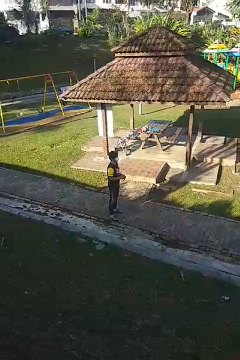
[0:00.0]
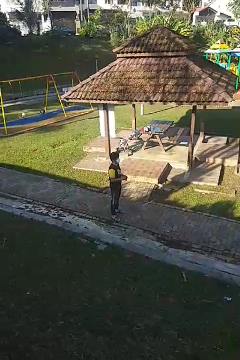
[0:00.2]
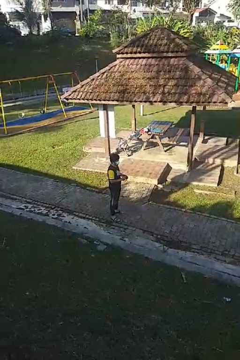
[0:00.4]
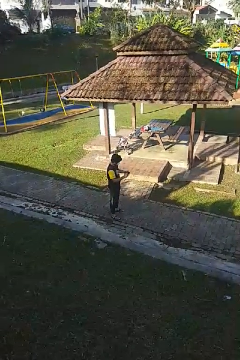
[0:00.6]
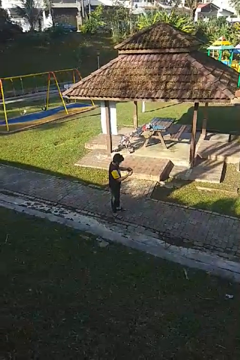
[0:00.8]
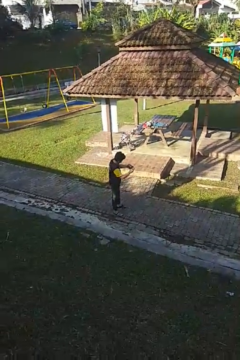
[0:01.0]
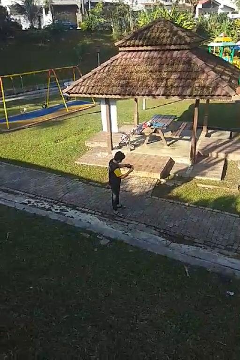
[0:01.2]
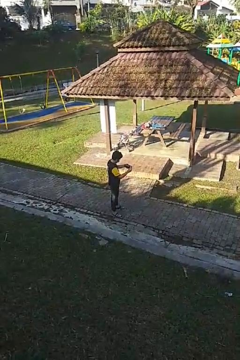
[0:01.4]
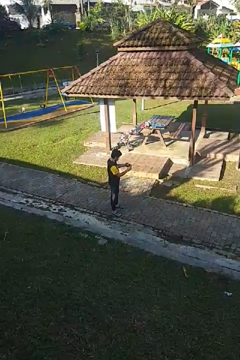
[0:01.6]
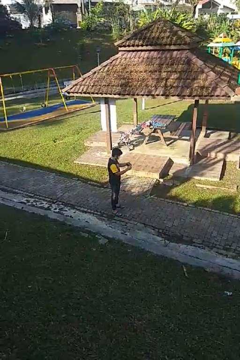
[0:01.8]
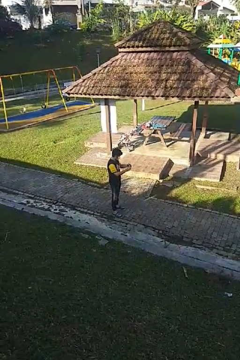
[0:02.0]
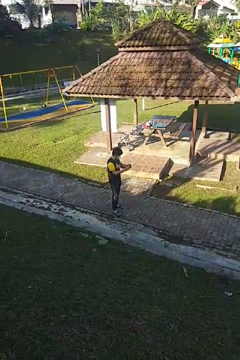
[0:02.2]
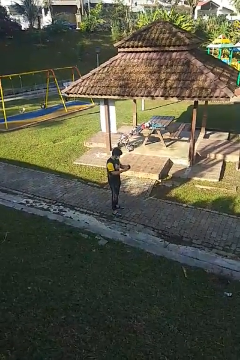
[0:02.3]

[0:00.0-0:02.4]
person searches in purse

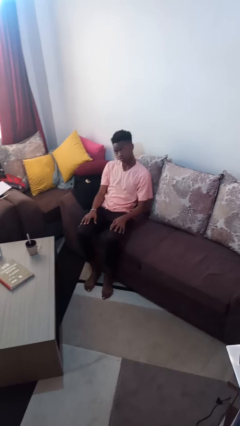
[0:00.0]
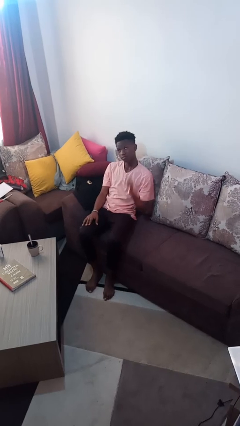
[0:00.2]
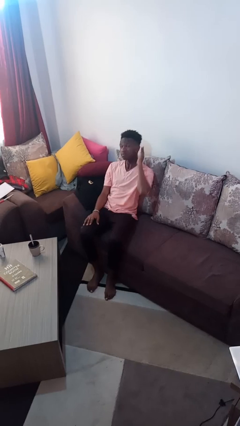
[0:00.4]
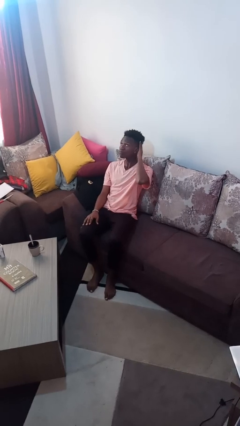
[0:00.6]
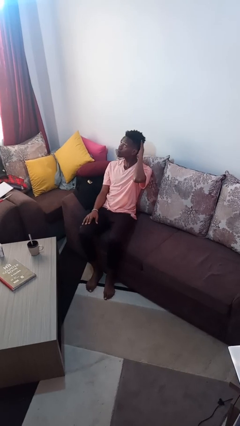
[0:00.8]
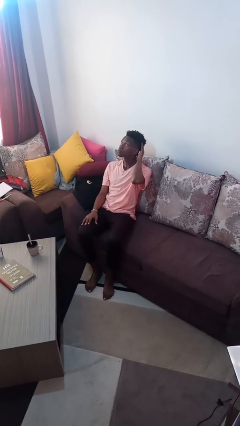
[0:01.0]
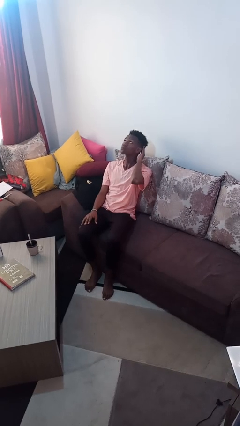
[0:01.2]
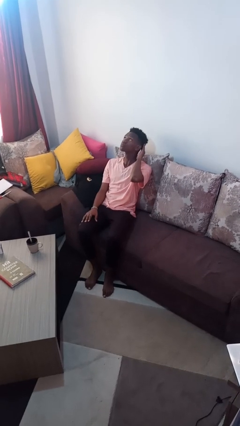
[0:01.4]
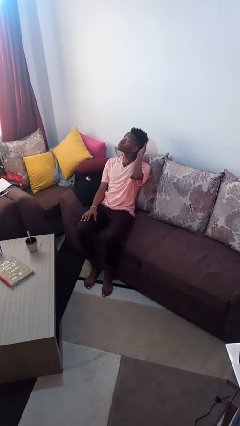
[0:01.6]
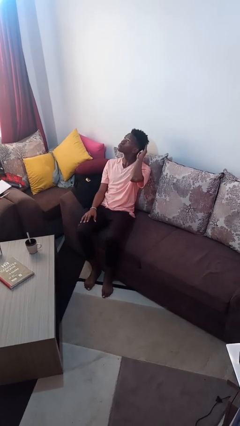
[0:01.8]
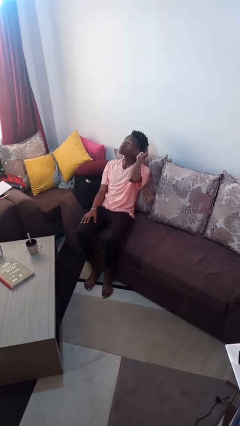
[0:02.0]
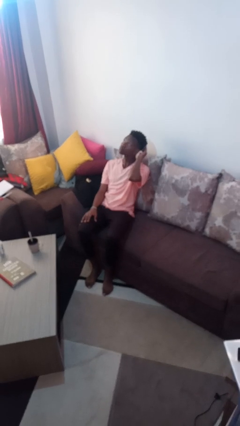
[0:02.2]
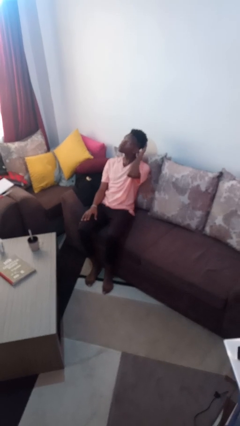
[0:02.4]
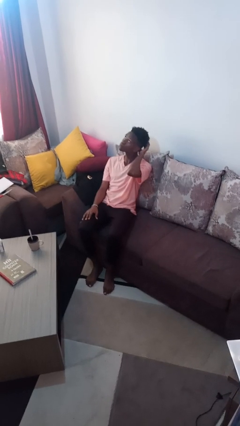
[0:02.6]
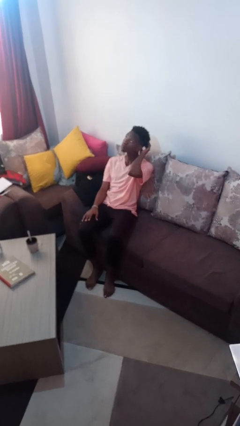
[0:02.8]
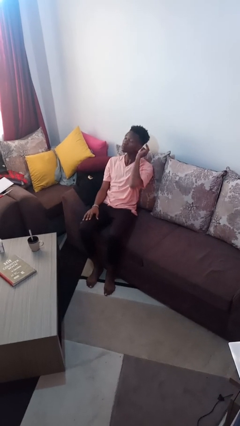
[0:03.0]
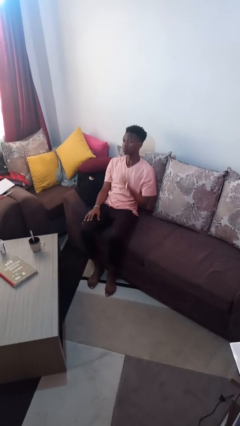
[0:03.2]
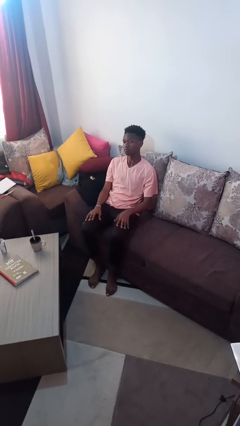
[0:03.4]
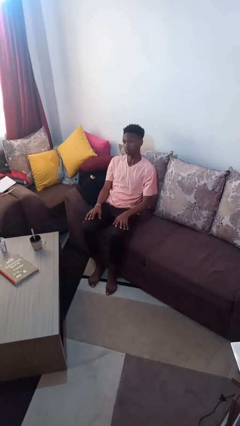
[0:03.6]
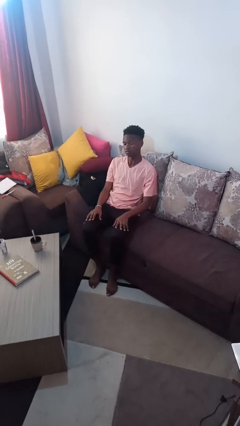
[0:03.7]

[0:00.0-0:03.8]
person strokes hair

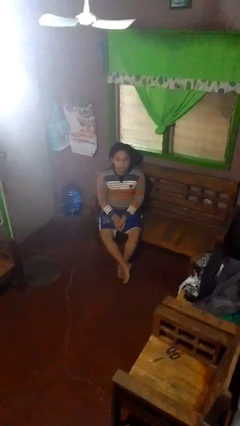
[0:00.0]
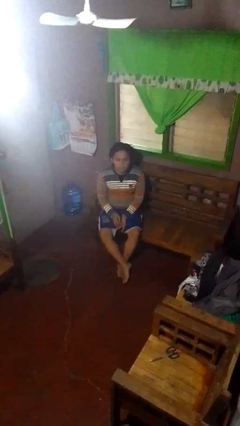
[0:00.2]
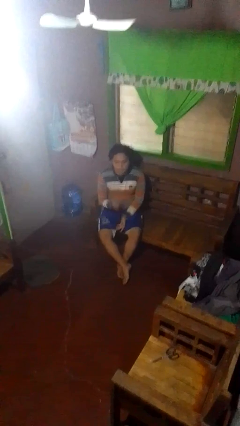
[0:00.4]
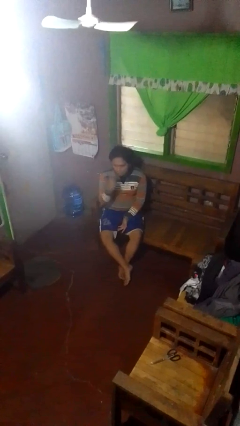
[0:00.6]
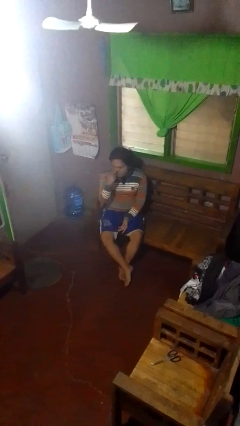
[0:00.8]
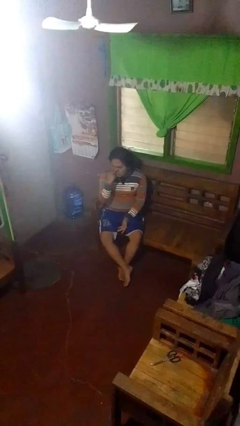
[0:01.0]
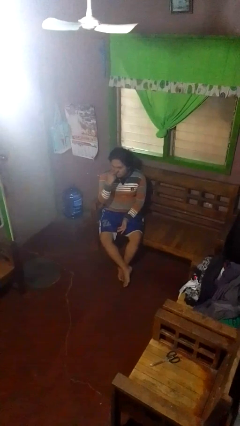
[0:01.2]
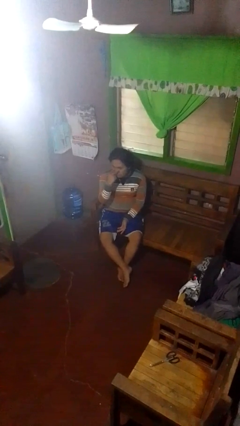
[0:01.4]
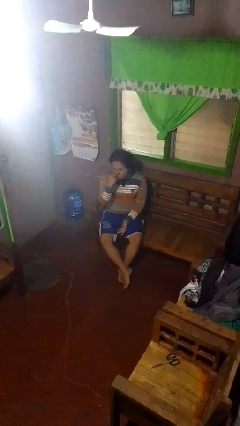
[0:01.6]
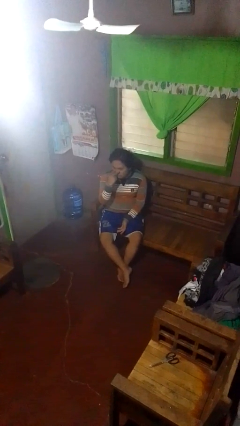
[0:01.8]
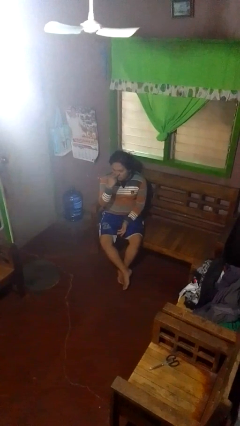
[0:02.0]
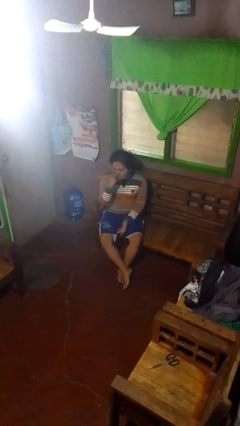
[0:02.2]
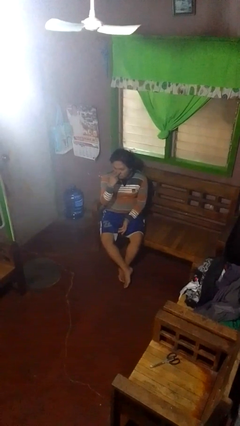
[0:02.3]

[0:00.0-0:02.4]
person gestures watch closely

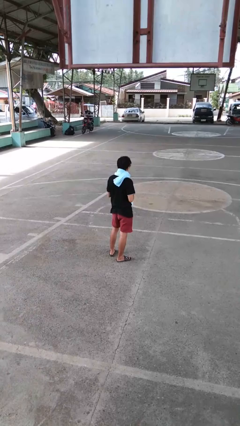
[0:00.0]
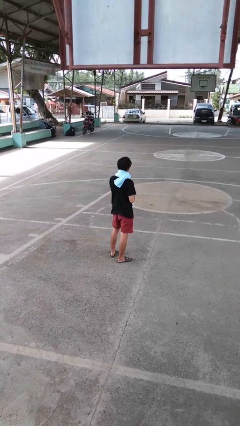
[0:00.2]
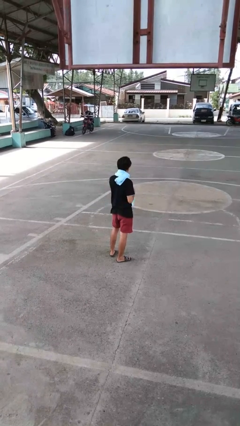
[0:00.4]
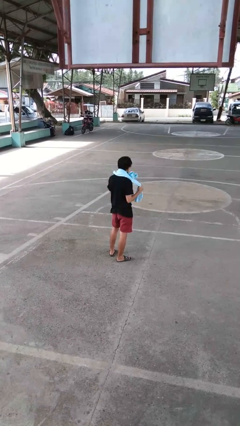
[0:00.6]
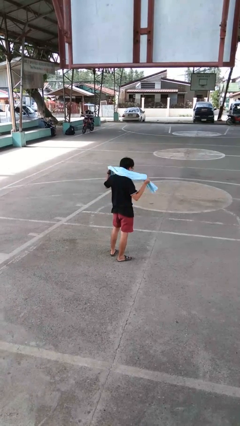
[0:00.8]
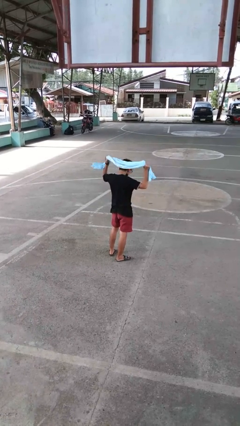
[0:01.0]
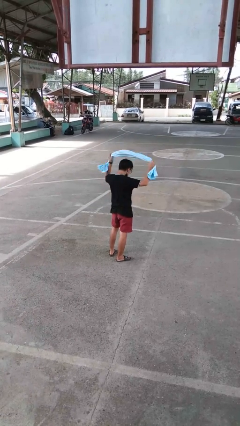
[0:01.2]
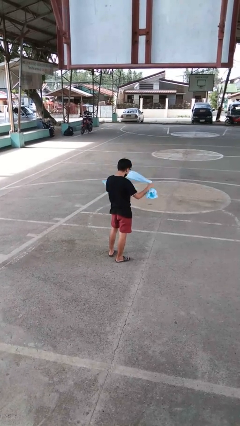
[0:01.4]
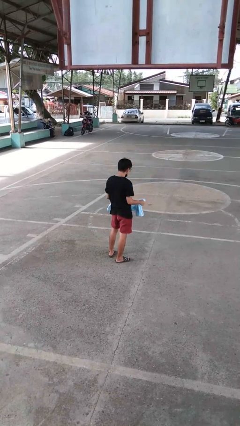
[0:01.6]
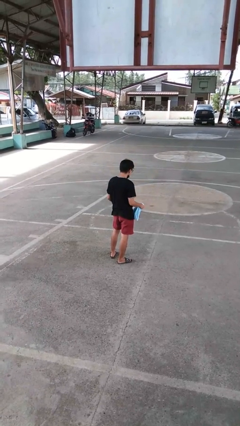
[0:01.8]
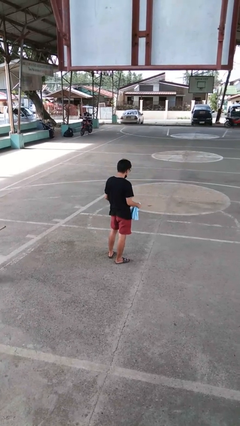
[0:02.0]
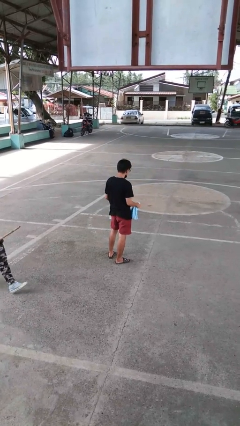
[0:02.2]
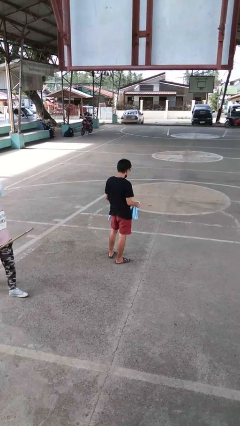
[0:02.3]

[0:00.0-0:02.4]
person takes off scarf

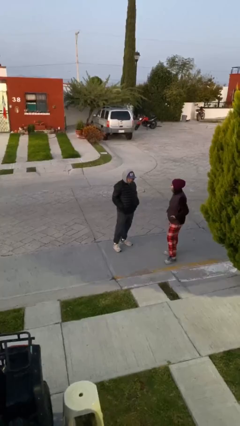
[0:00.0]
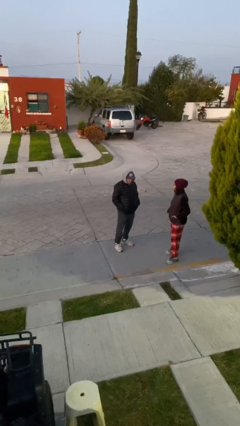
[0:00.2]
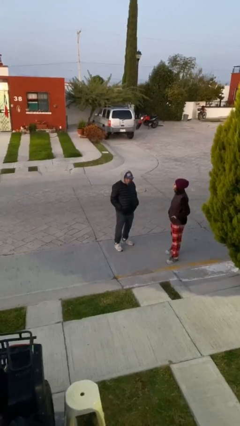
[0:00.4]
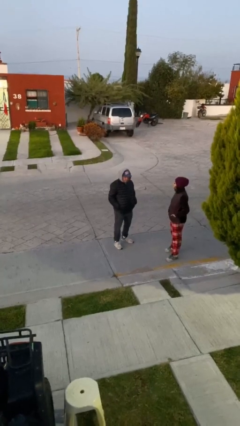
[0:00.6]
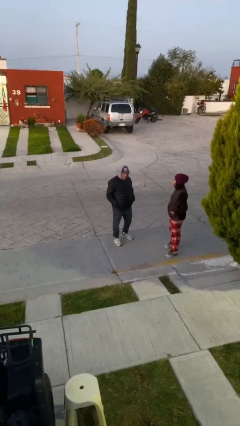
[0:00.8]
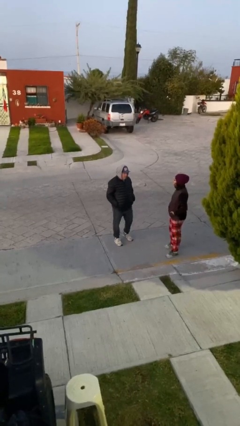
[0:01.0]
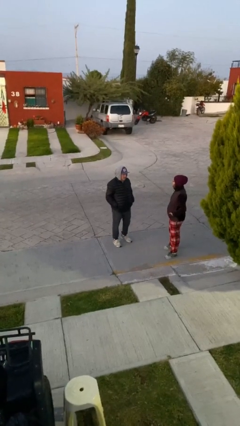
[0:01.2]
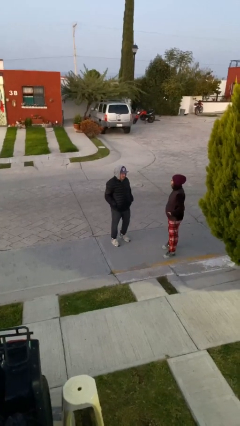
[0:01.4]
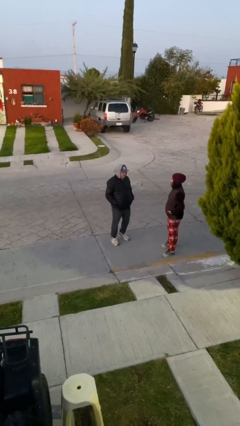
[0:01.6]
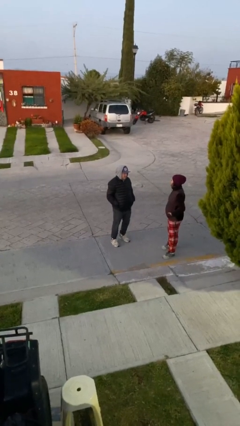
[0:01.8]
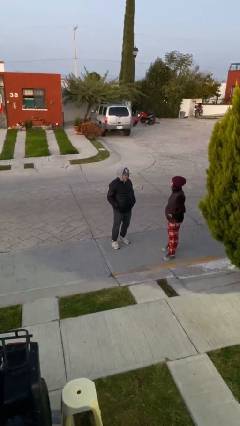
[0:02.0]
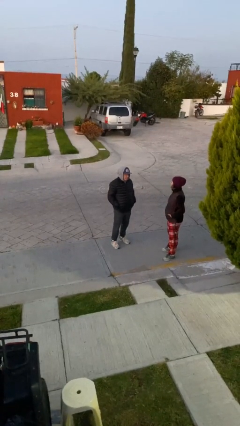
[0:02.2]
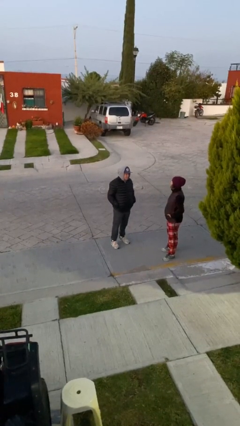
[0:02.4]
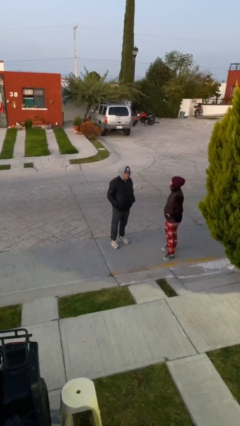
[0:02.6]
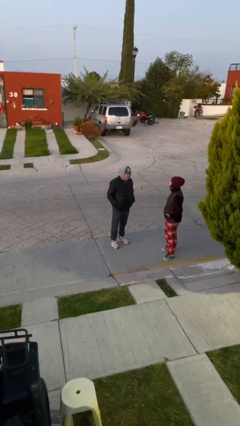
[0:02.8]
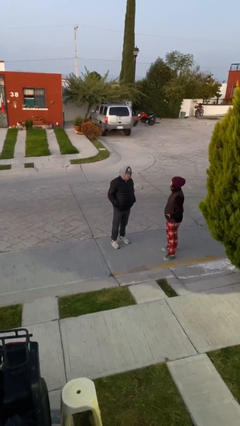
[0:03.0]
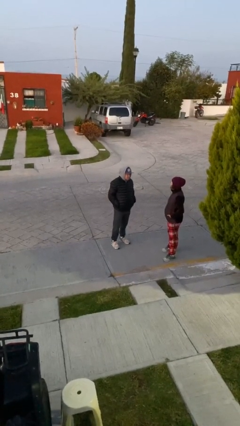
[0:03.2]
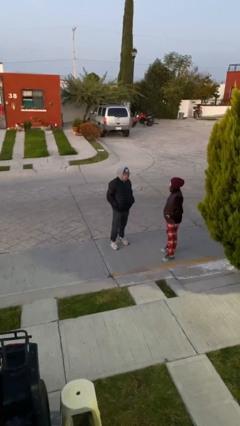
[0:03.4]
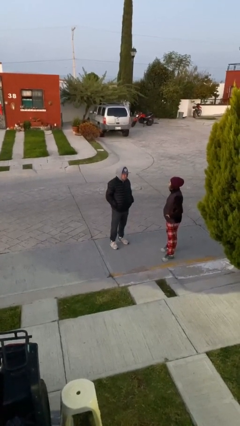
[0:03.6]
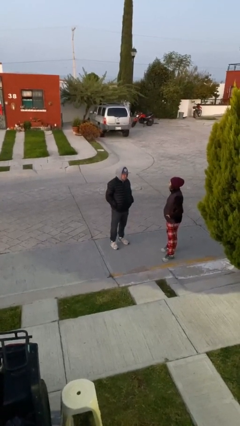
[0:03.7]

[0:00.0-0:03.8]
person talks to person

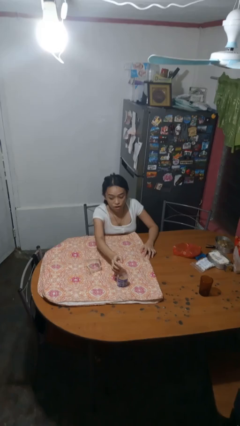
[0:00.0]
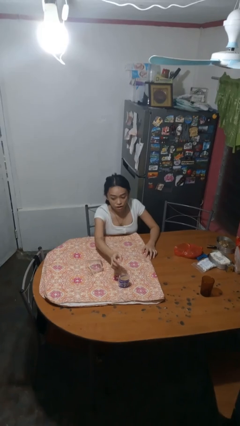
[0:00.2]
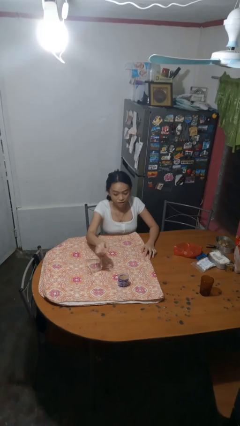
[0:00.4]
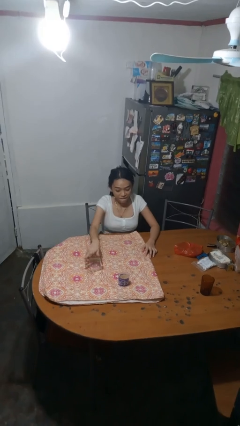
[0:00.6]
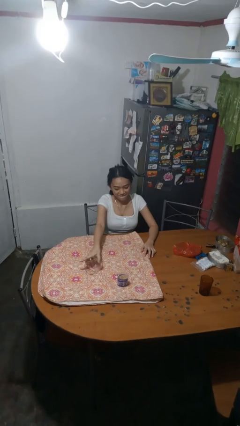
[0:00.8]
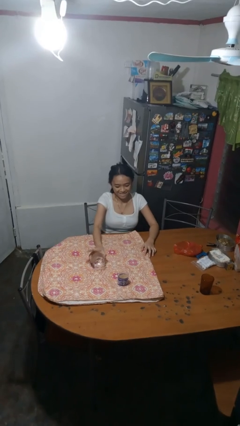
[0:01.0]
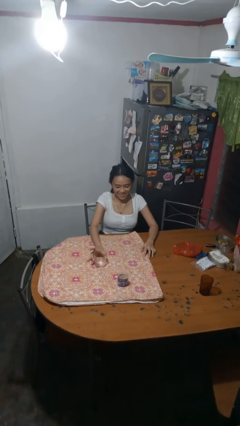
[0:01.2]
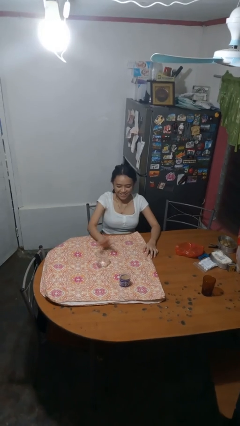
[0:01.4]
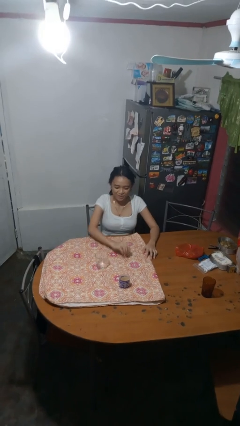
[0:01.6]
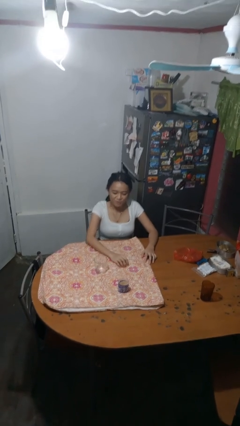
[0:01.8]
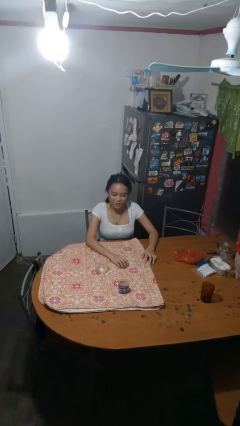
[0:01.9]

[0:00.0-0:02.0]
person sets upright glass

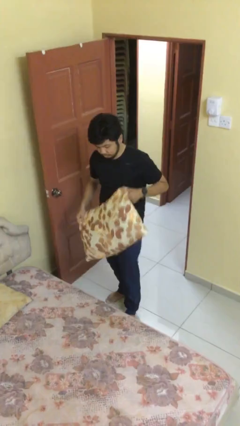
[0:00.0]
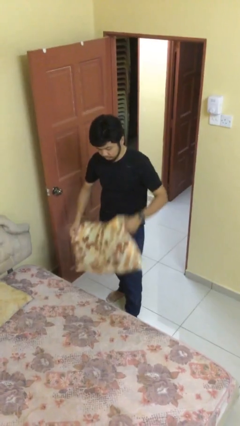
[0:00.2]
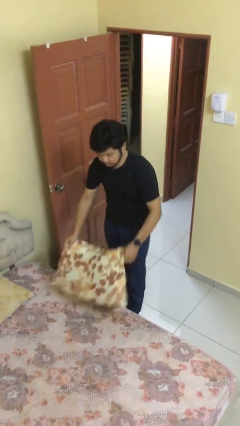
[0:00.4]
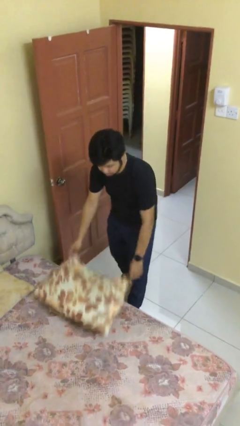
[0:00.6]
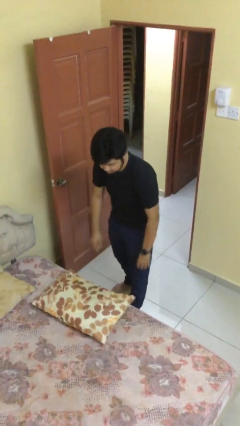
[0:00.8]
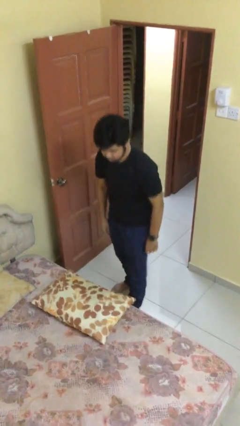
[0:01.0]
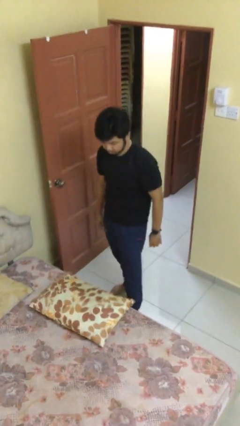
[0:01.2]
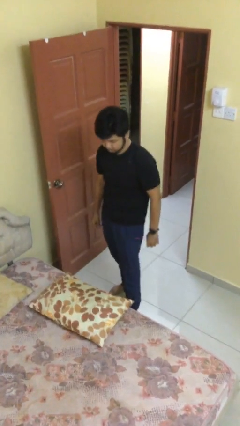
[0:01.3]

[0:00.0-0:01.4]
person puts down object on bed
